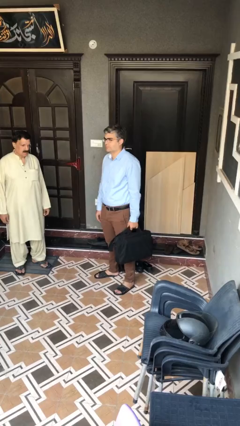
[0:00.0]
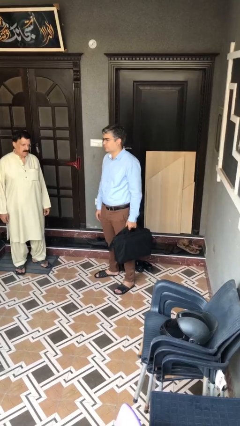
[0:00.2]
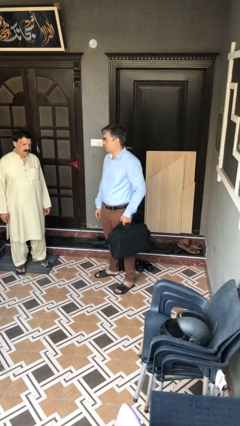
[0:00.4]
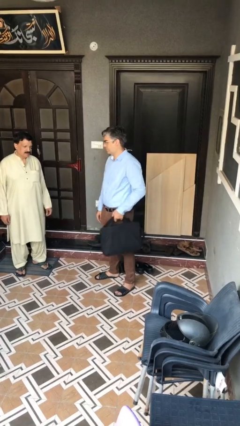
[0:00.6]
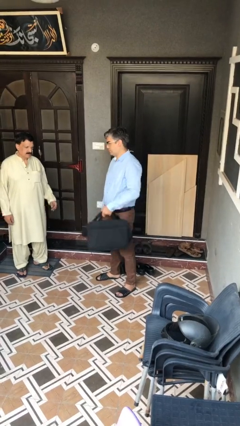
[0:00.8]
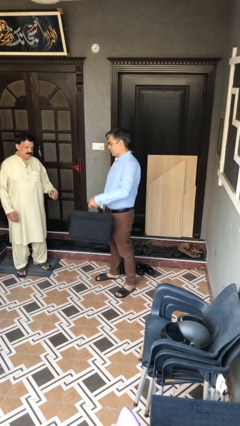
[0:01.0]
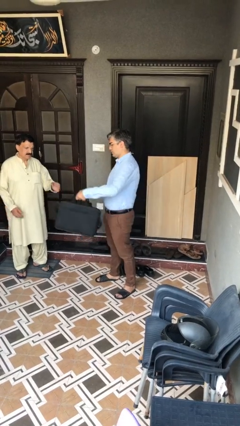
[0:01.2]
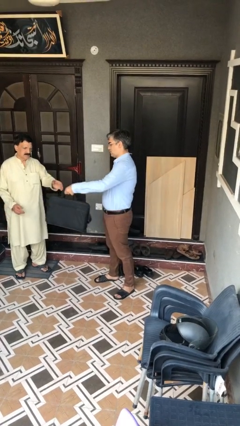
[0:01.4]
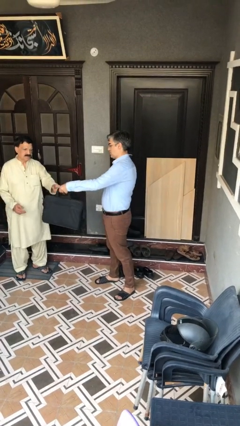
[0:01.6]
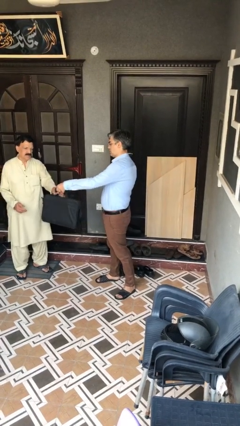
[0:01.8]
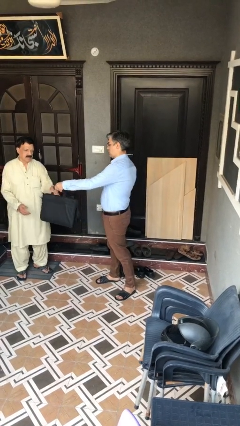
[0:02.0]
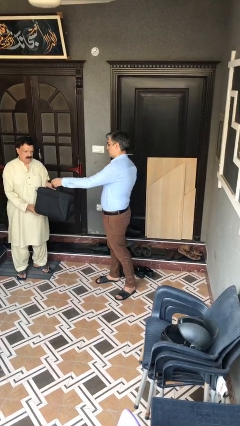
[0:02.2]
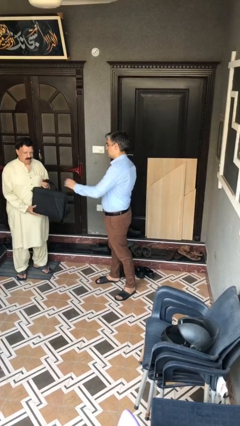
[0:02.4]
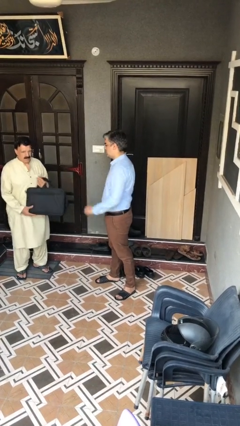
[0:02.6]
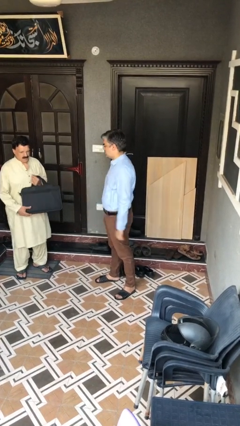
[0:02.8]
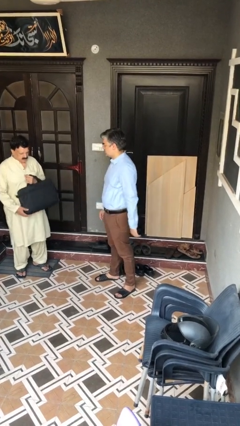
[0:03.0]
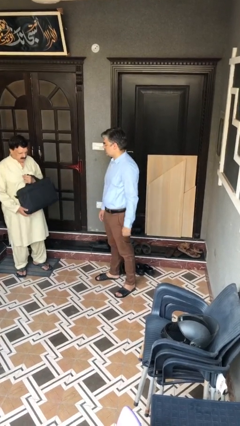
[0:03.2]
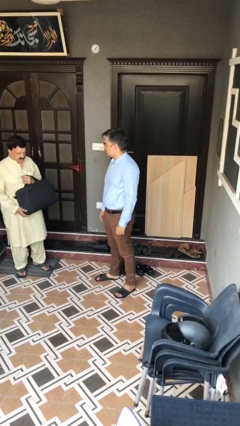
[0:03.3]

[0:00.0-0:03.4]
person transfers object to person

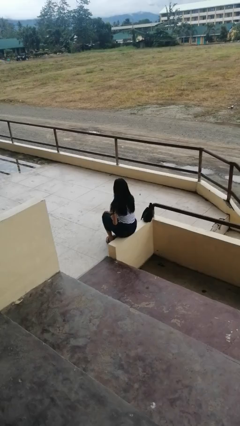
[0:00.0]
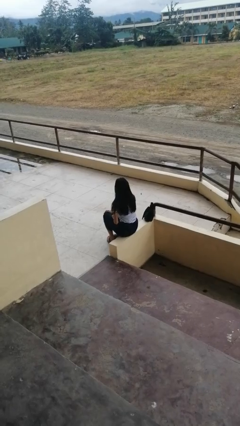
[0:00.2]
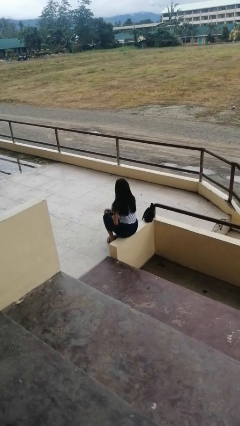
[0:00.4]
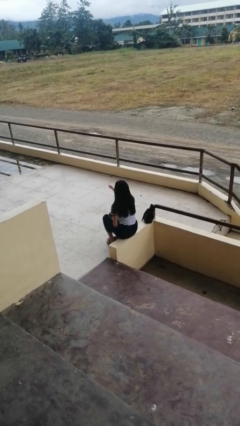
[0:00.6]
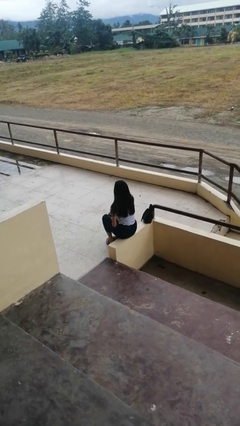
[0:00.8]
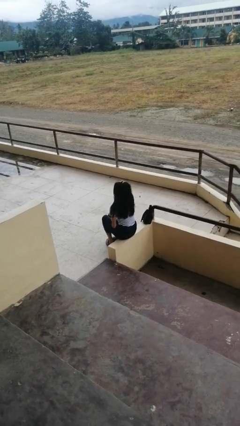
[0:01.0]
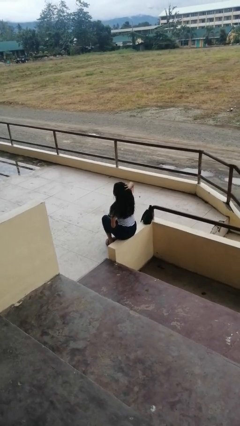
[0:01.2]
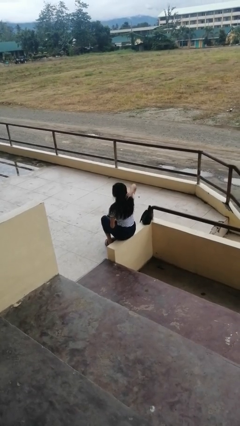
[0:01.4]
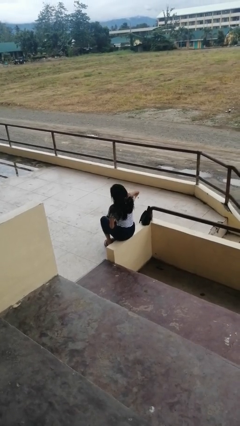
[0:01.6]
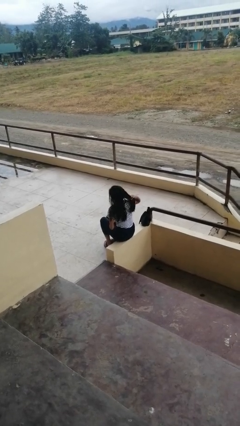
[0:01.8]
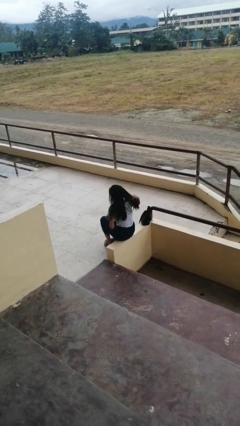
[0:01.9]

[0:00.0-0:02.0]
person strokes hair

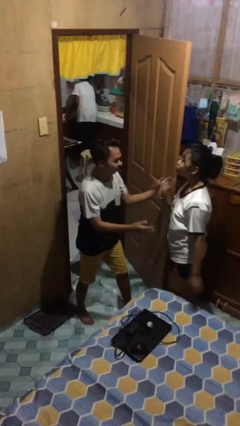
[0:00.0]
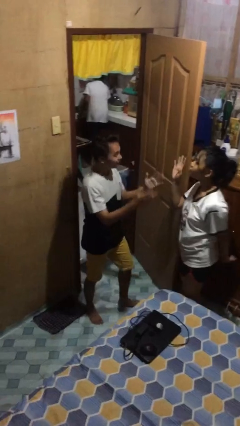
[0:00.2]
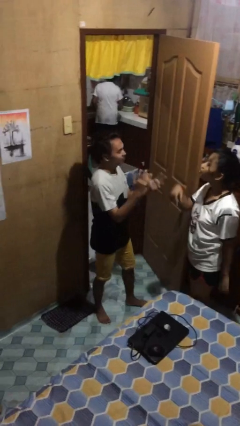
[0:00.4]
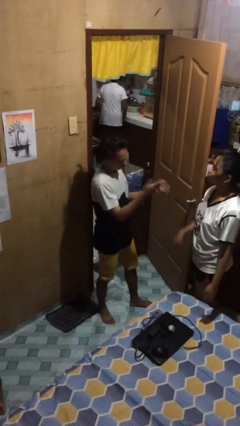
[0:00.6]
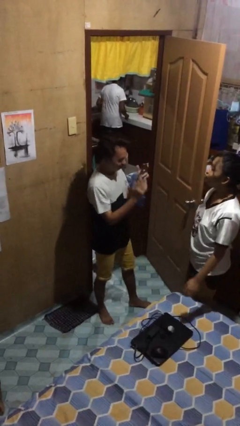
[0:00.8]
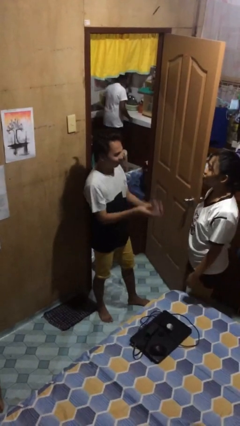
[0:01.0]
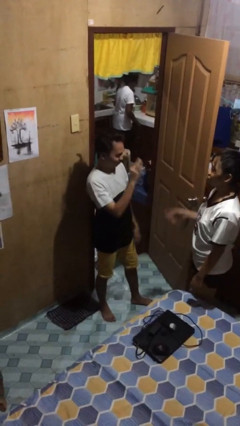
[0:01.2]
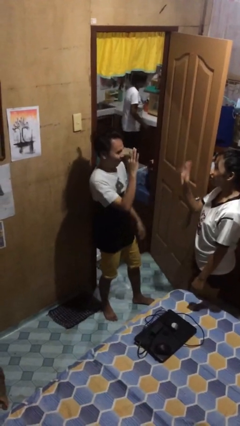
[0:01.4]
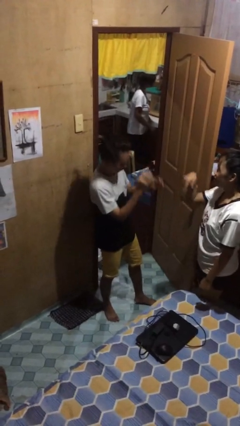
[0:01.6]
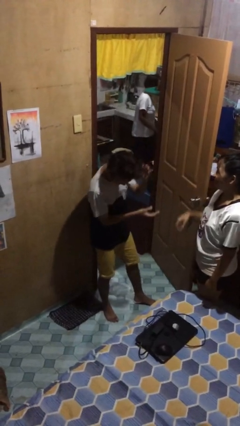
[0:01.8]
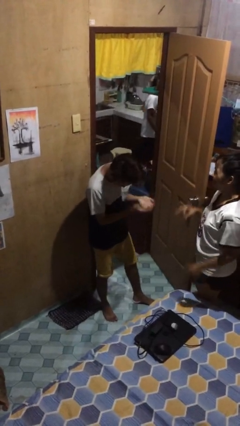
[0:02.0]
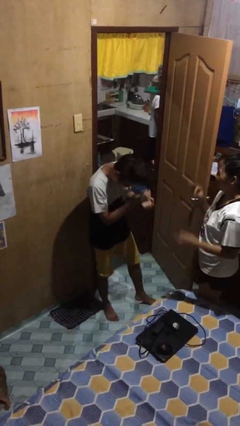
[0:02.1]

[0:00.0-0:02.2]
person talks to person

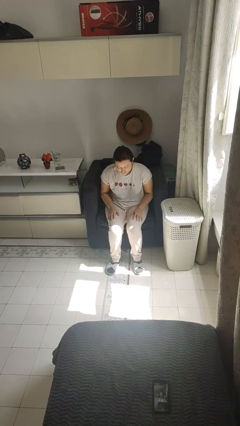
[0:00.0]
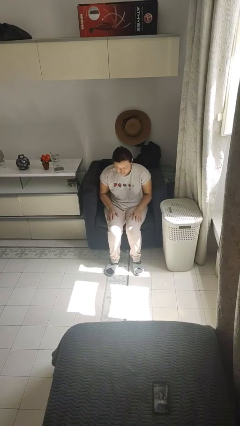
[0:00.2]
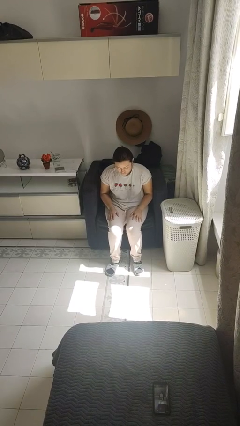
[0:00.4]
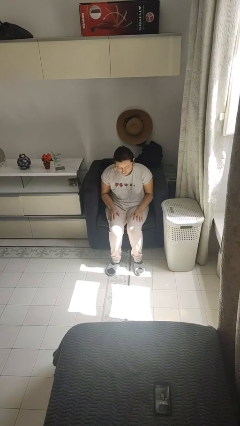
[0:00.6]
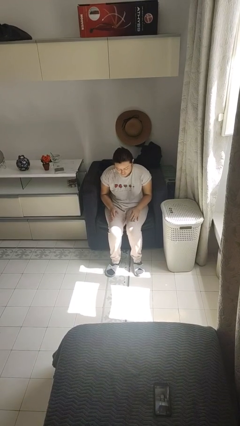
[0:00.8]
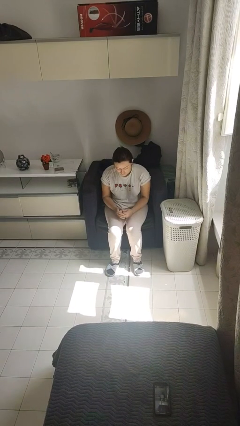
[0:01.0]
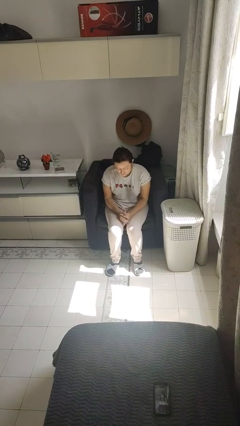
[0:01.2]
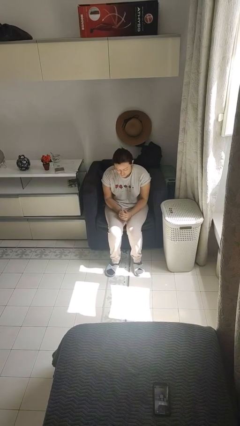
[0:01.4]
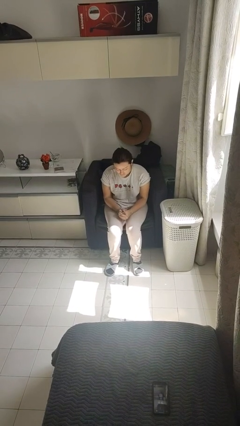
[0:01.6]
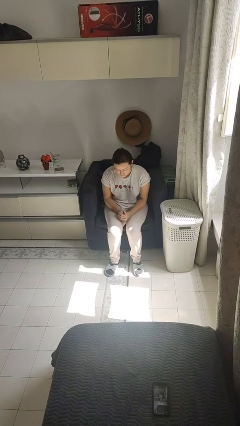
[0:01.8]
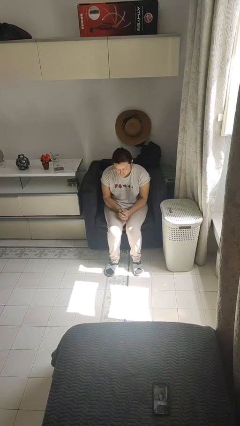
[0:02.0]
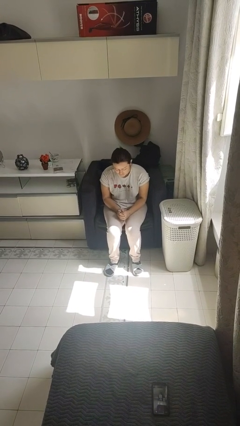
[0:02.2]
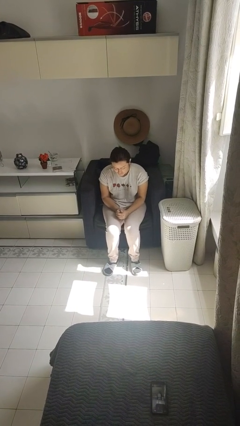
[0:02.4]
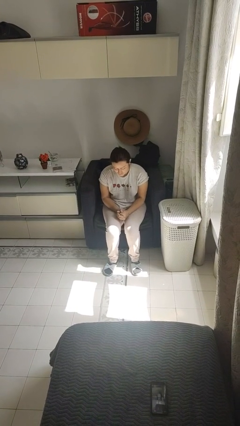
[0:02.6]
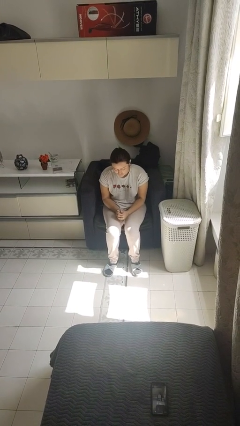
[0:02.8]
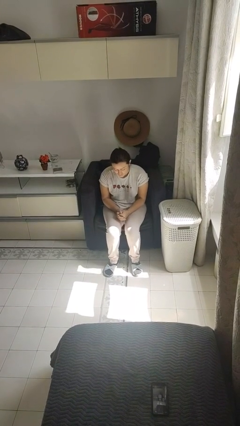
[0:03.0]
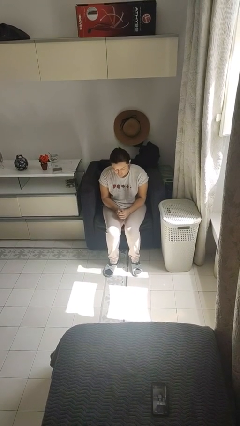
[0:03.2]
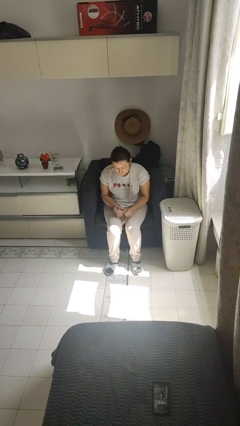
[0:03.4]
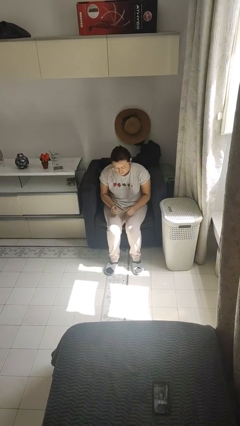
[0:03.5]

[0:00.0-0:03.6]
person looks at hands in lap

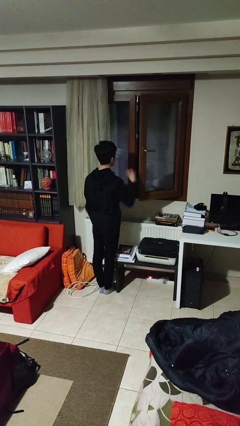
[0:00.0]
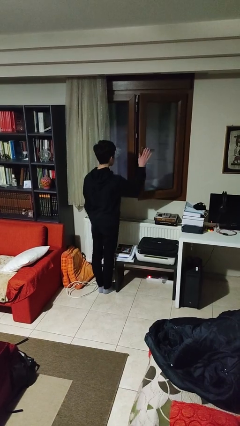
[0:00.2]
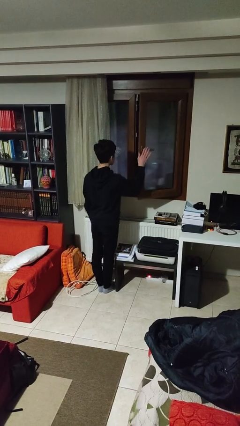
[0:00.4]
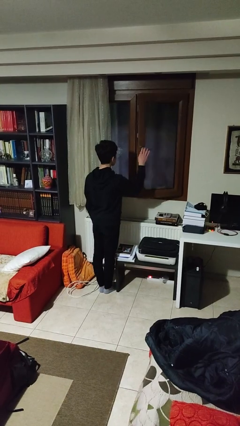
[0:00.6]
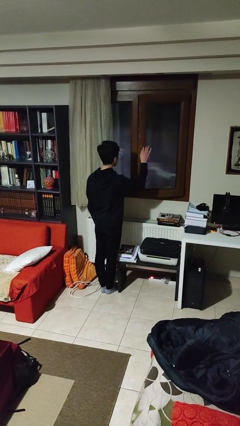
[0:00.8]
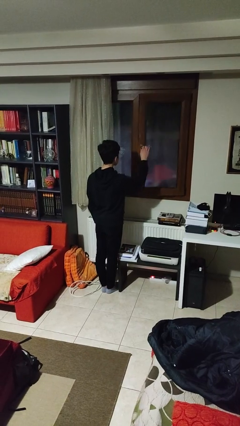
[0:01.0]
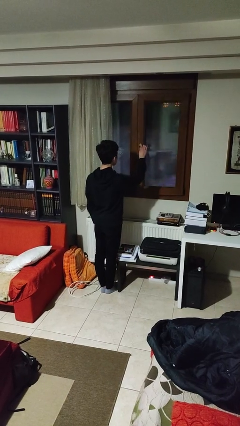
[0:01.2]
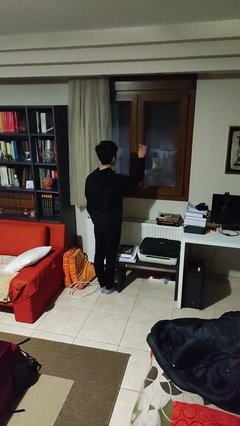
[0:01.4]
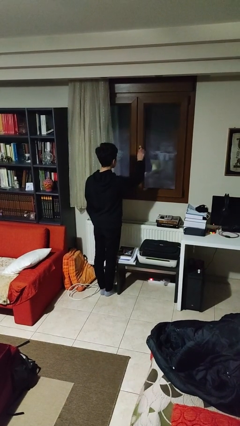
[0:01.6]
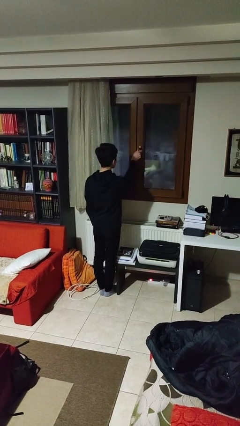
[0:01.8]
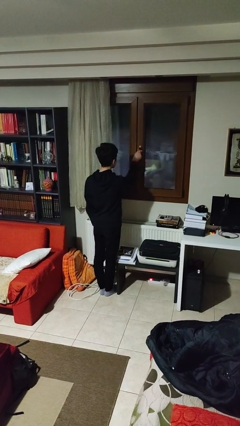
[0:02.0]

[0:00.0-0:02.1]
person closes home window

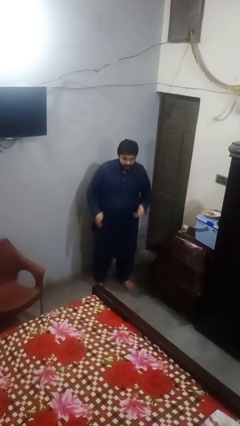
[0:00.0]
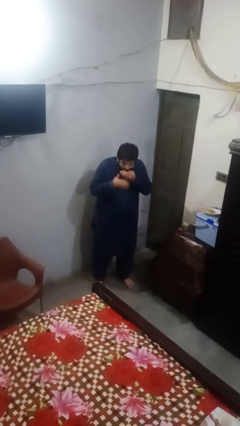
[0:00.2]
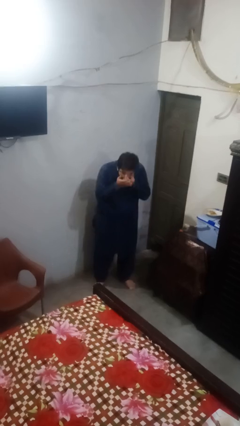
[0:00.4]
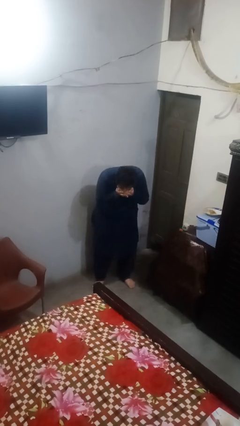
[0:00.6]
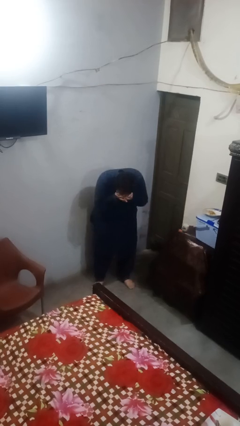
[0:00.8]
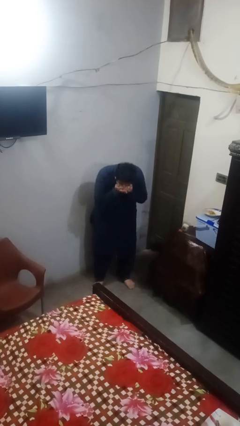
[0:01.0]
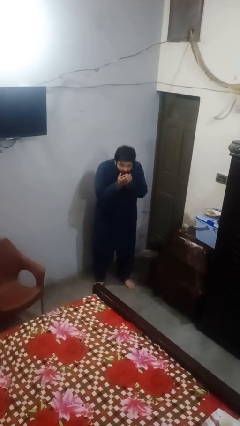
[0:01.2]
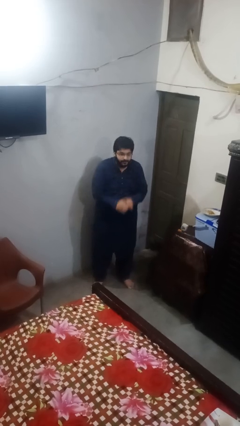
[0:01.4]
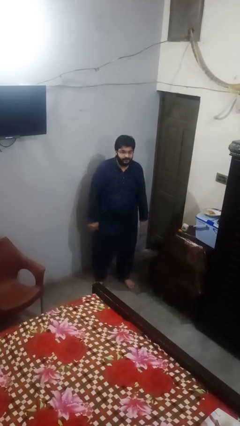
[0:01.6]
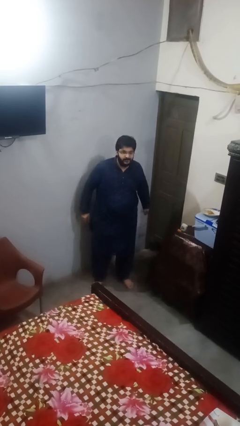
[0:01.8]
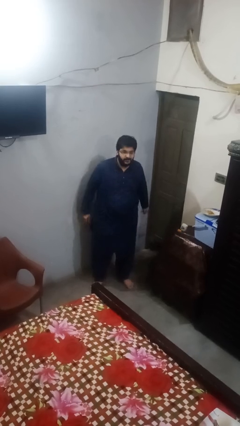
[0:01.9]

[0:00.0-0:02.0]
person sneezes into hand

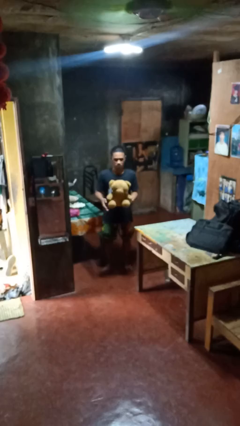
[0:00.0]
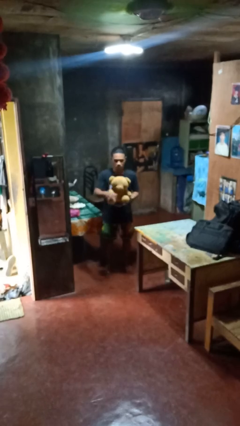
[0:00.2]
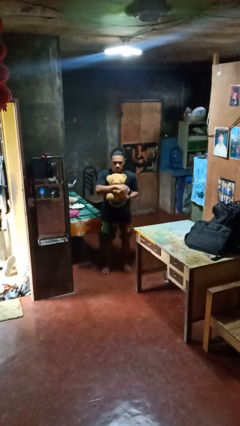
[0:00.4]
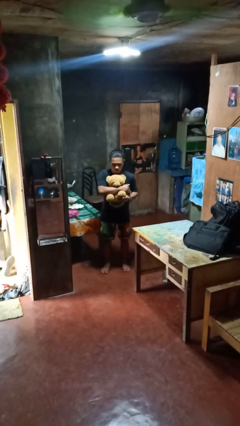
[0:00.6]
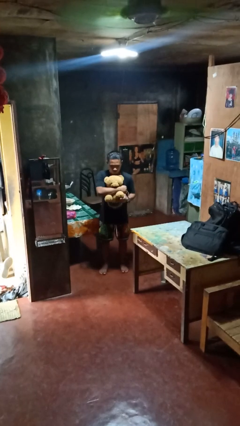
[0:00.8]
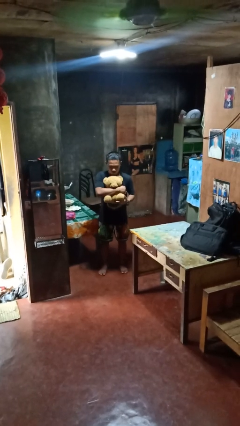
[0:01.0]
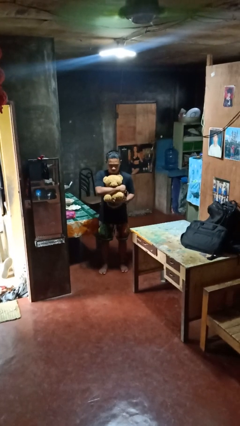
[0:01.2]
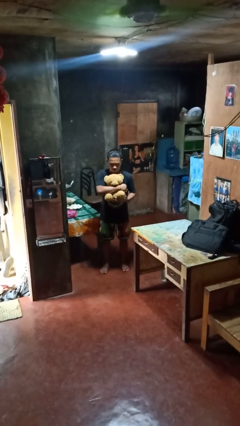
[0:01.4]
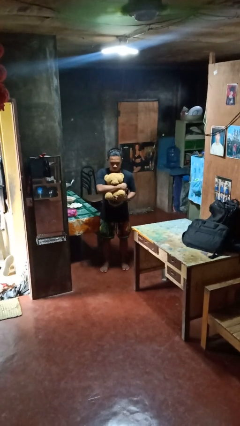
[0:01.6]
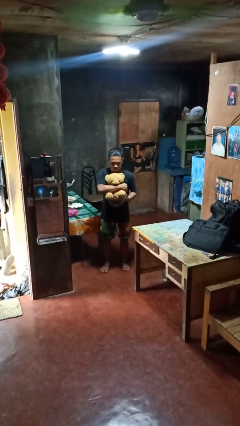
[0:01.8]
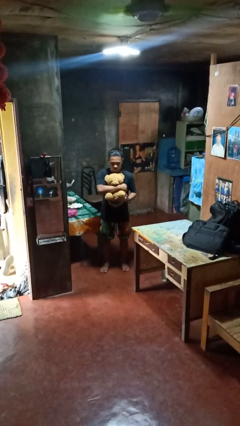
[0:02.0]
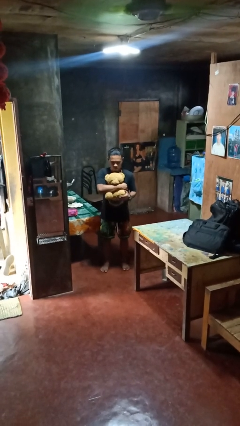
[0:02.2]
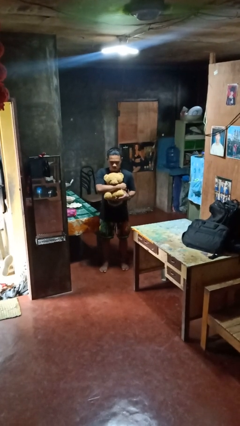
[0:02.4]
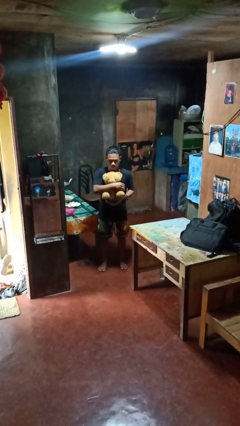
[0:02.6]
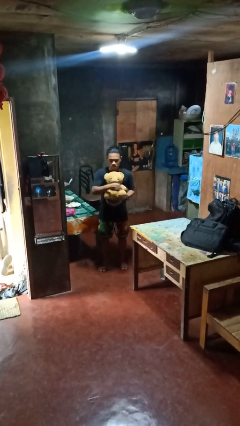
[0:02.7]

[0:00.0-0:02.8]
person hugs stuffed animal
